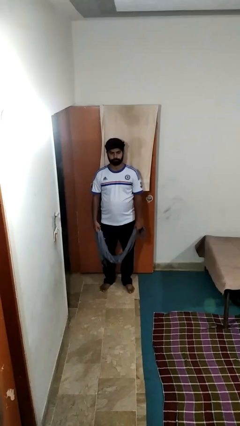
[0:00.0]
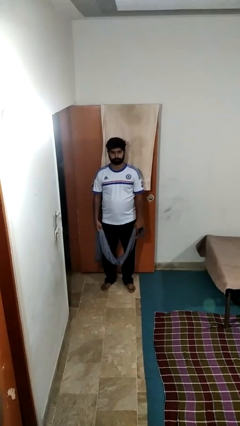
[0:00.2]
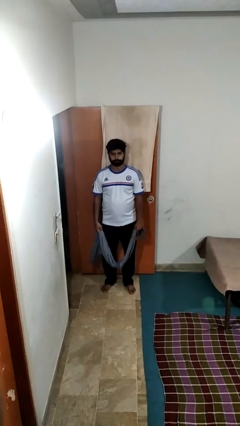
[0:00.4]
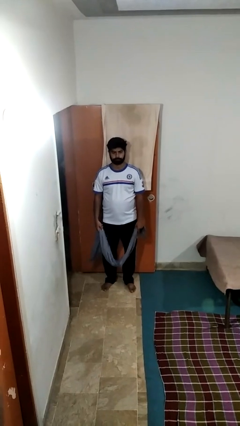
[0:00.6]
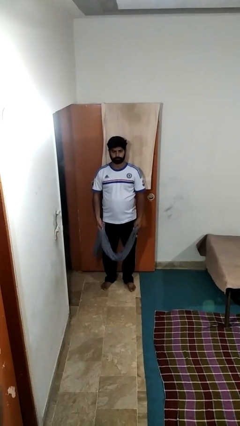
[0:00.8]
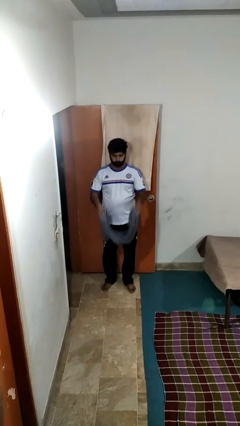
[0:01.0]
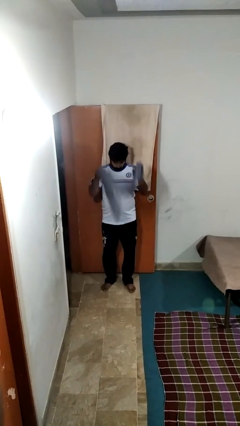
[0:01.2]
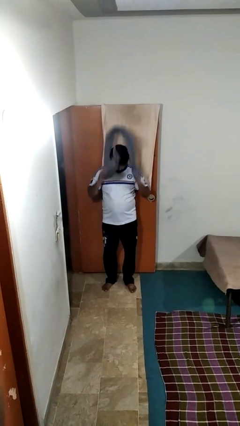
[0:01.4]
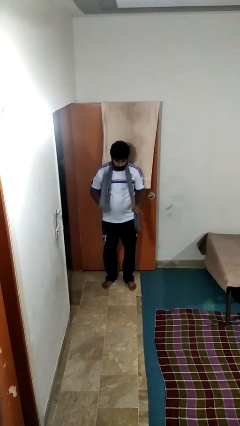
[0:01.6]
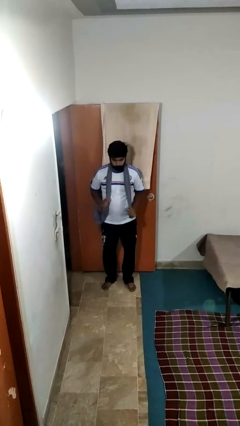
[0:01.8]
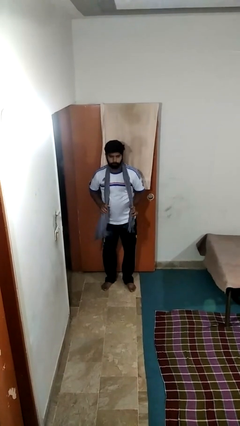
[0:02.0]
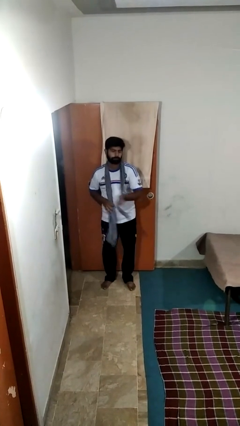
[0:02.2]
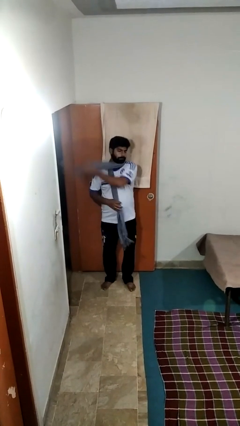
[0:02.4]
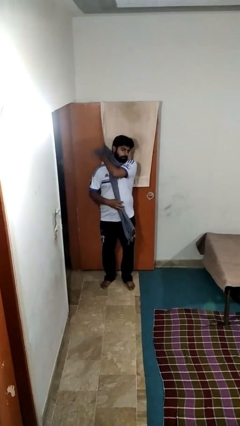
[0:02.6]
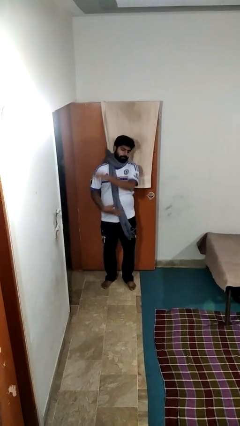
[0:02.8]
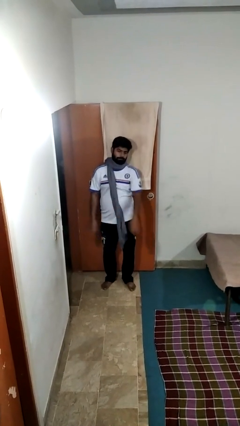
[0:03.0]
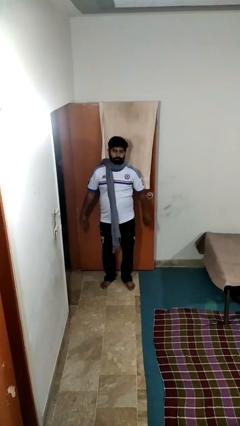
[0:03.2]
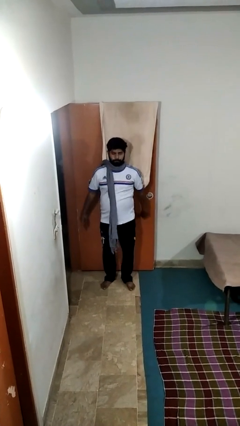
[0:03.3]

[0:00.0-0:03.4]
person puts on scarf

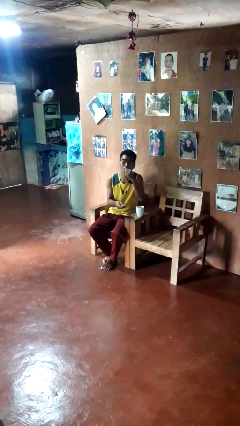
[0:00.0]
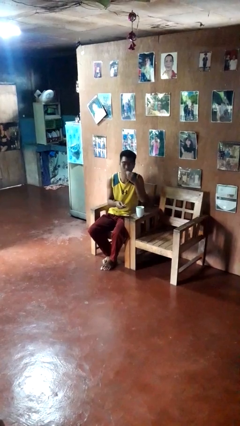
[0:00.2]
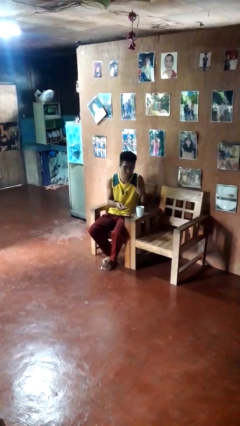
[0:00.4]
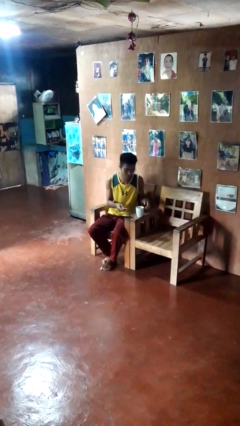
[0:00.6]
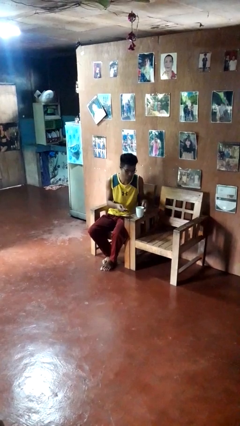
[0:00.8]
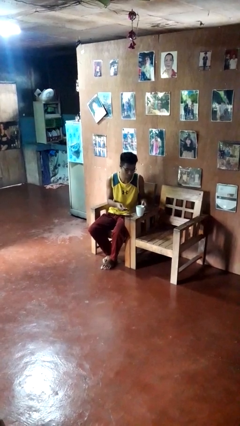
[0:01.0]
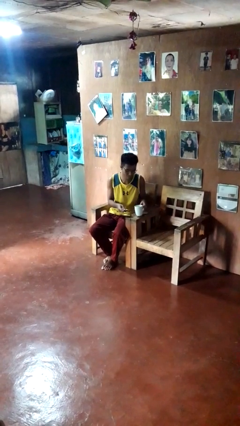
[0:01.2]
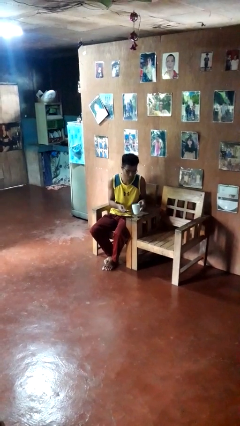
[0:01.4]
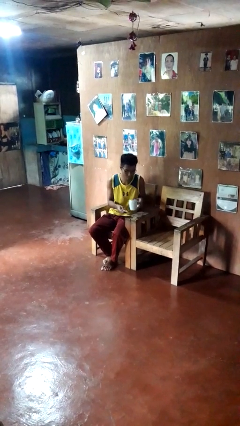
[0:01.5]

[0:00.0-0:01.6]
person takes medicine pills

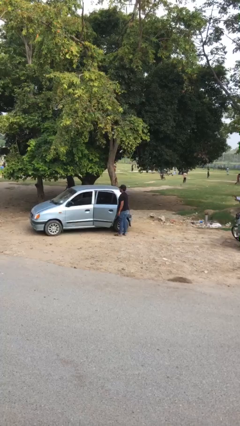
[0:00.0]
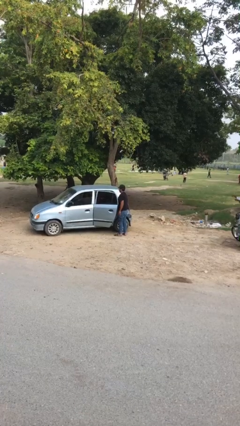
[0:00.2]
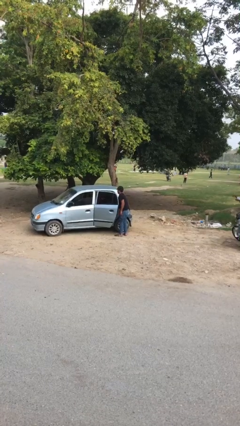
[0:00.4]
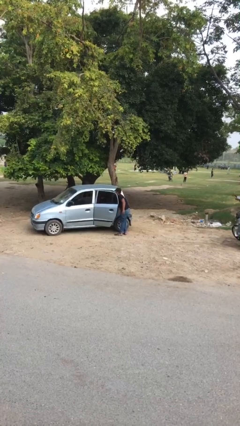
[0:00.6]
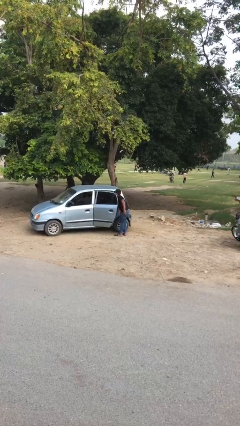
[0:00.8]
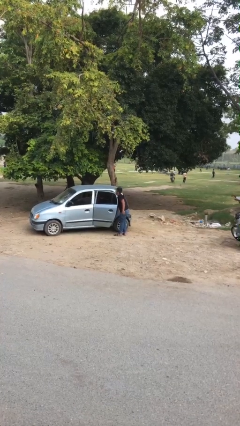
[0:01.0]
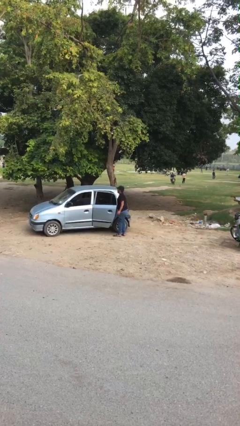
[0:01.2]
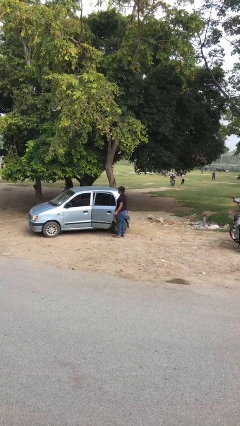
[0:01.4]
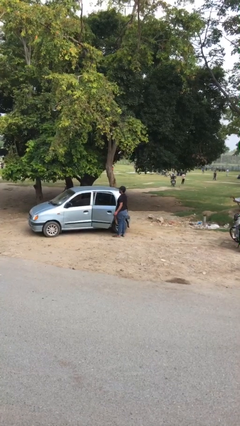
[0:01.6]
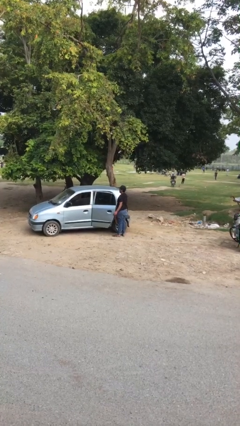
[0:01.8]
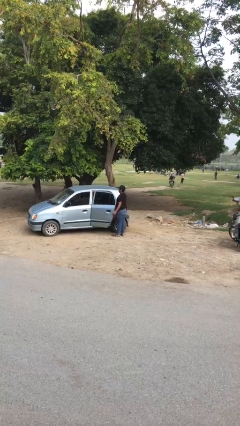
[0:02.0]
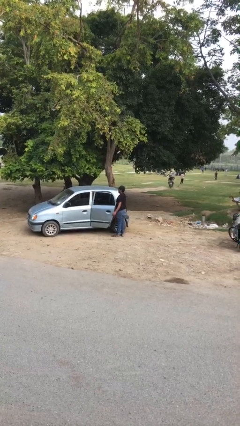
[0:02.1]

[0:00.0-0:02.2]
person unloads car

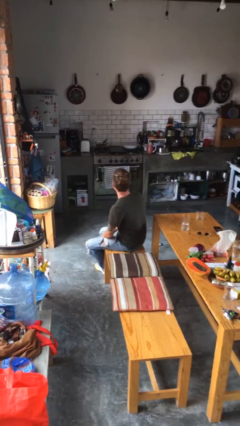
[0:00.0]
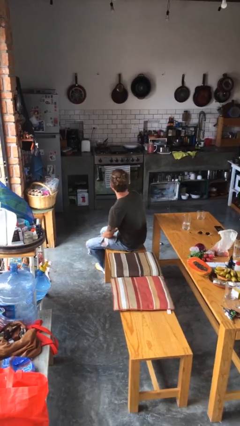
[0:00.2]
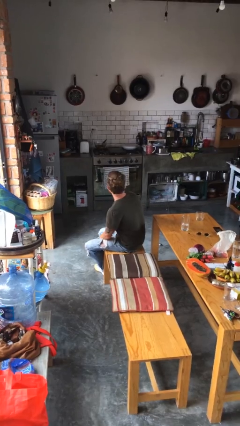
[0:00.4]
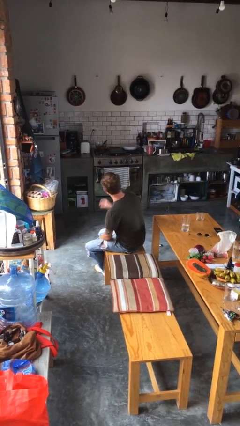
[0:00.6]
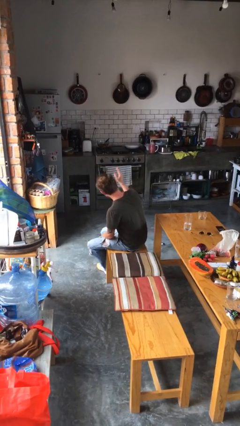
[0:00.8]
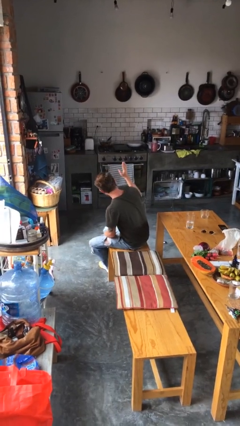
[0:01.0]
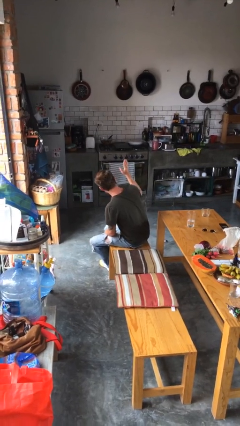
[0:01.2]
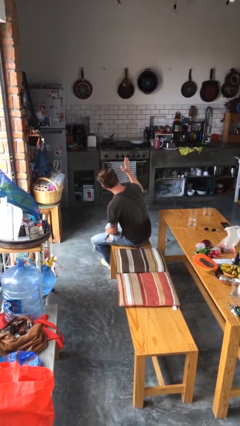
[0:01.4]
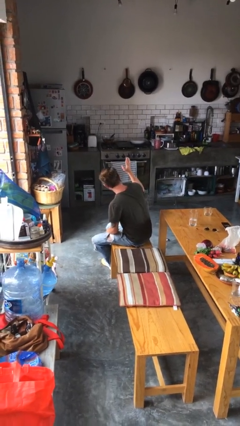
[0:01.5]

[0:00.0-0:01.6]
person gestures raise hand

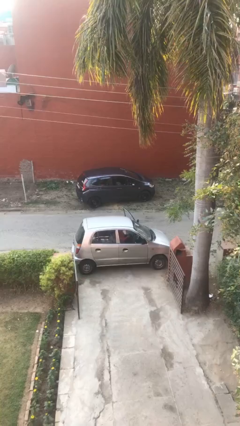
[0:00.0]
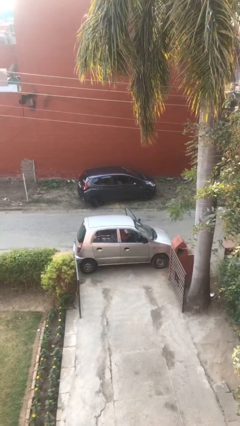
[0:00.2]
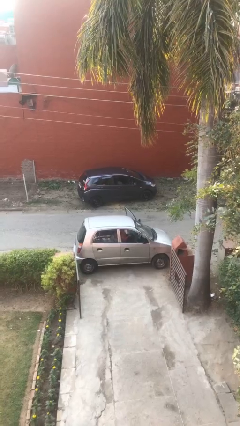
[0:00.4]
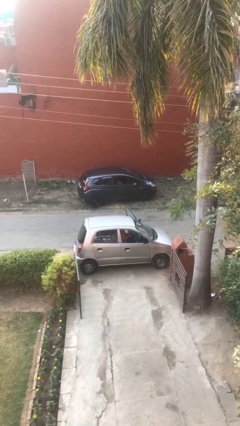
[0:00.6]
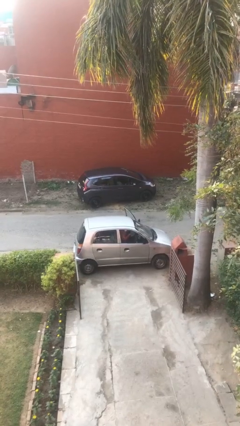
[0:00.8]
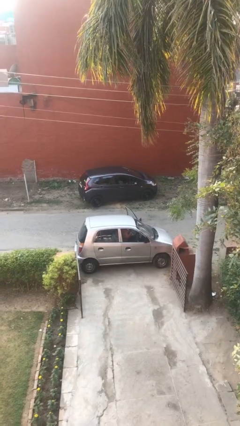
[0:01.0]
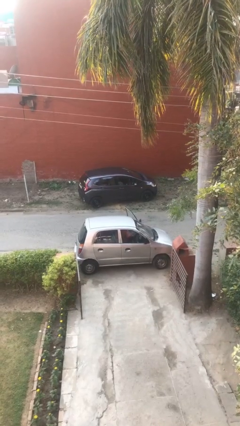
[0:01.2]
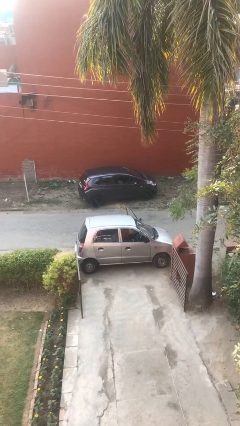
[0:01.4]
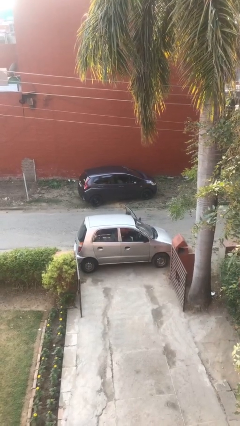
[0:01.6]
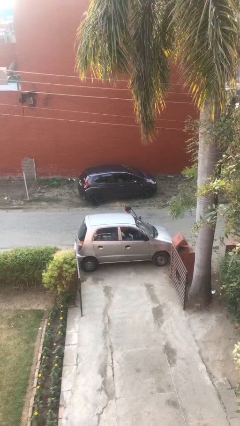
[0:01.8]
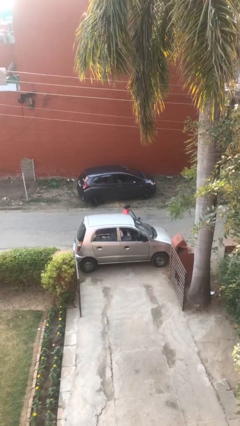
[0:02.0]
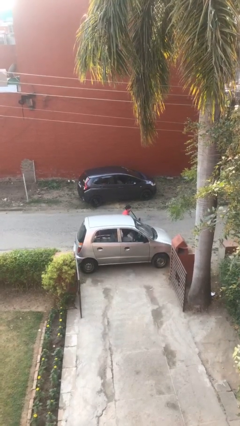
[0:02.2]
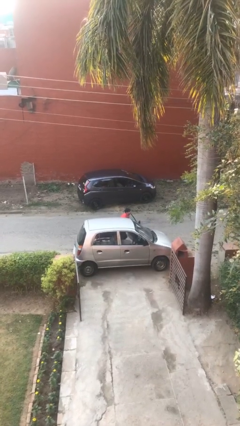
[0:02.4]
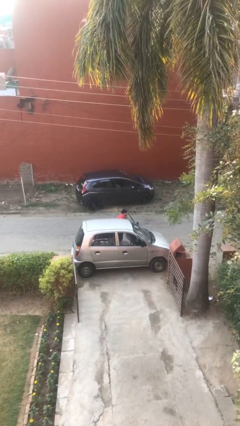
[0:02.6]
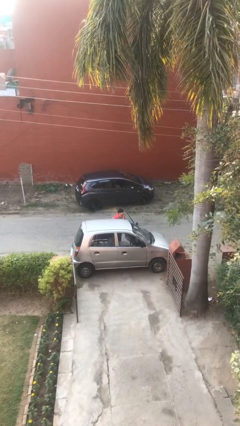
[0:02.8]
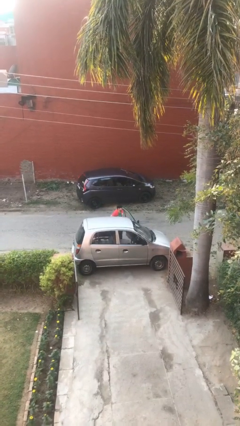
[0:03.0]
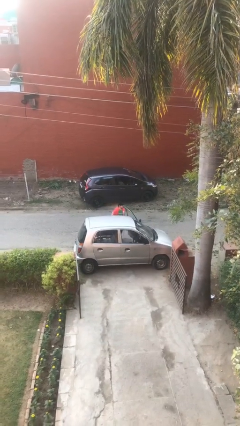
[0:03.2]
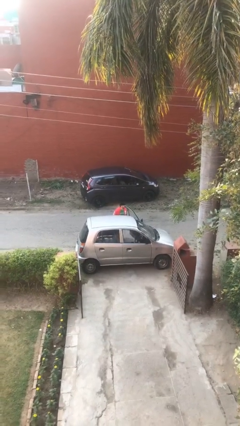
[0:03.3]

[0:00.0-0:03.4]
person exits car

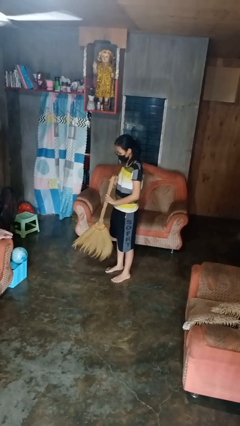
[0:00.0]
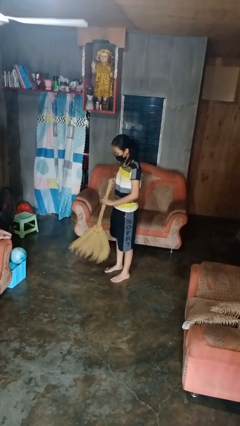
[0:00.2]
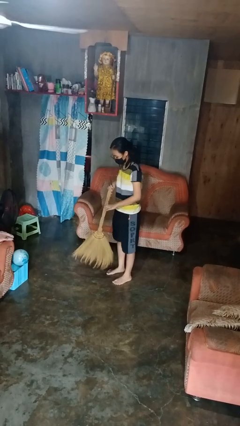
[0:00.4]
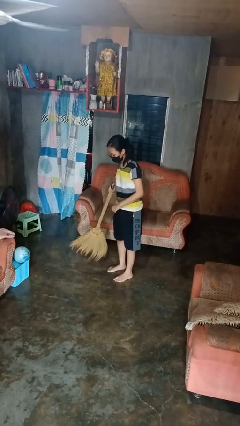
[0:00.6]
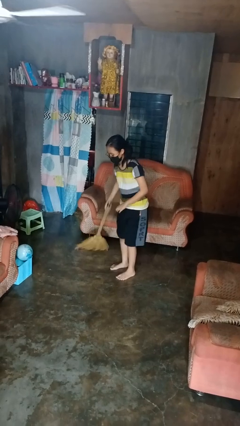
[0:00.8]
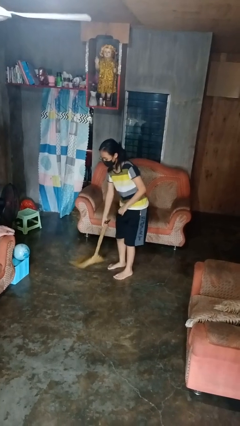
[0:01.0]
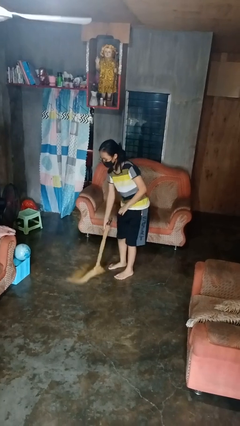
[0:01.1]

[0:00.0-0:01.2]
person sweeps floor

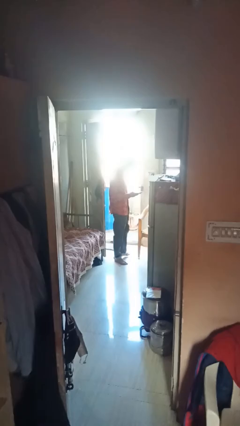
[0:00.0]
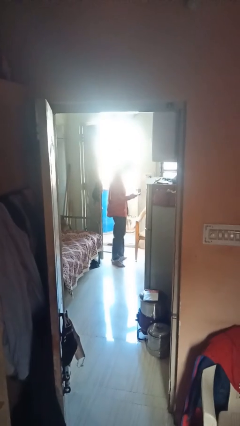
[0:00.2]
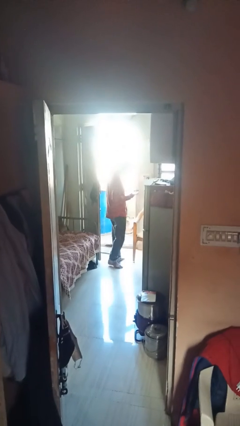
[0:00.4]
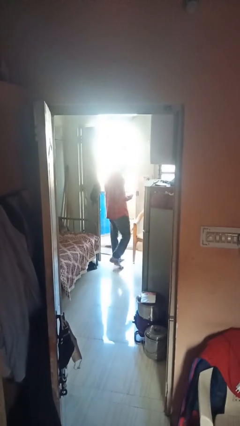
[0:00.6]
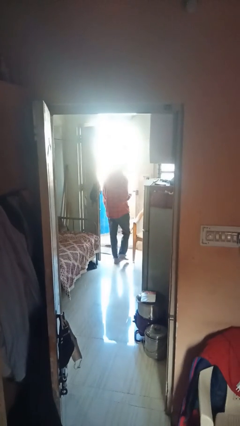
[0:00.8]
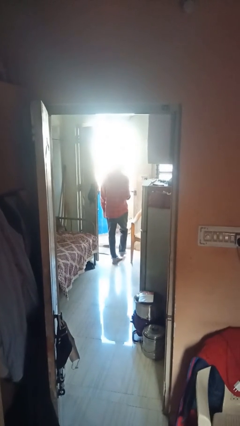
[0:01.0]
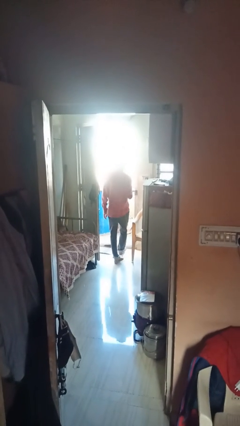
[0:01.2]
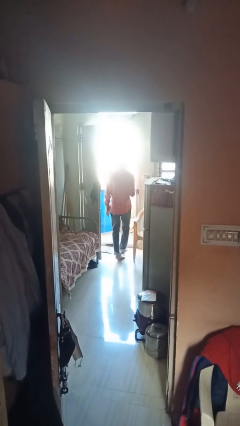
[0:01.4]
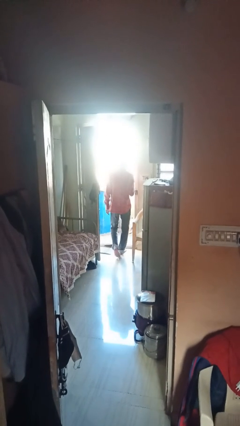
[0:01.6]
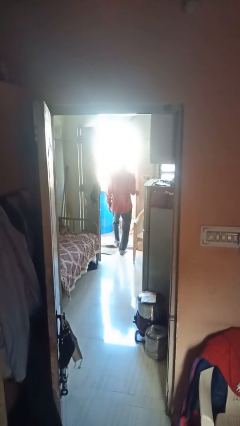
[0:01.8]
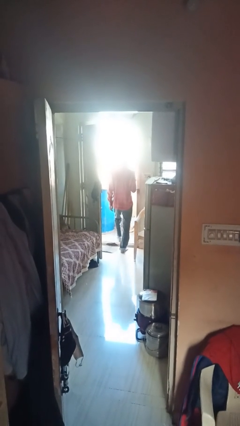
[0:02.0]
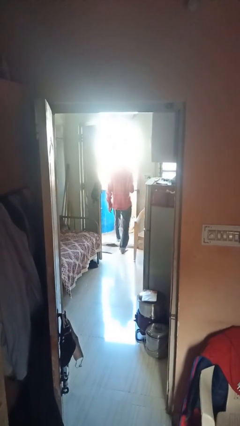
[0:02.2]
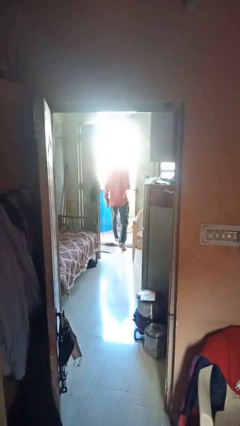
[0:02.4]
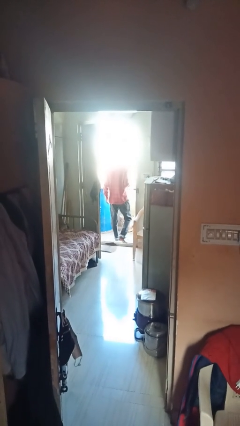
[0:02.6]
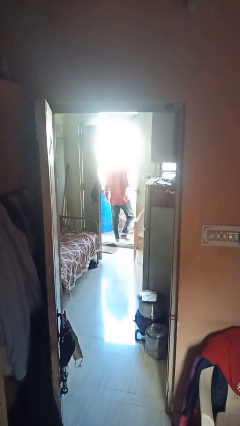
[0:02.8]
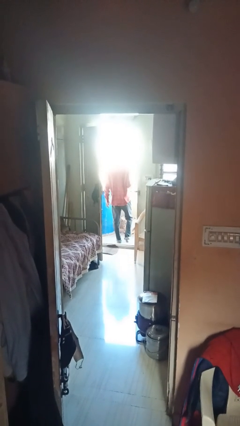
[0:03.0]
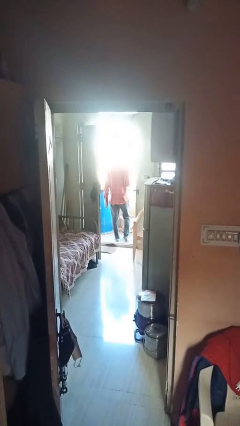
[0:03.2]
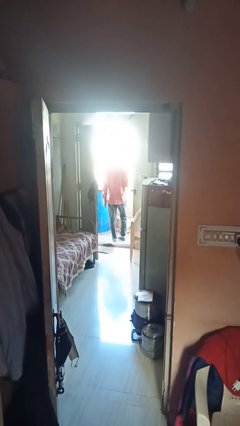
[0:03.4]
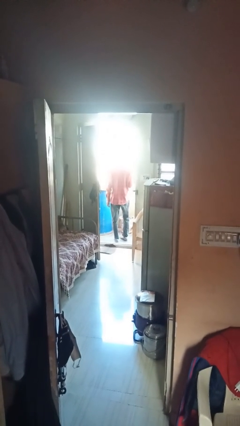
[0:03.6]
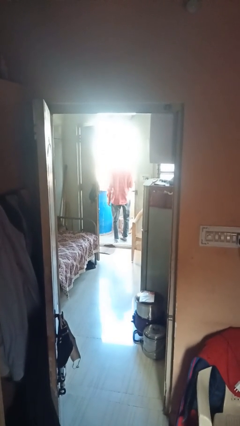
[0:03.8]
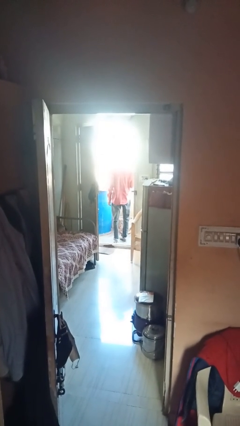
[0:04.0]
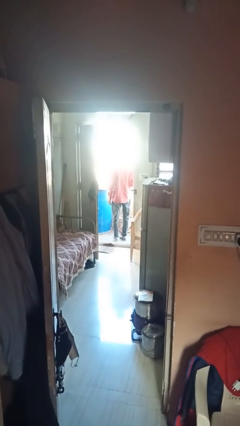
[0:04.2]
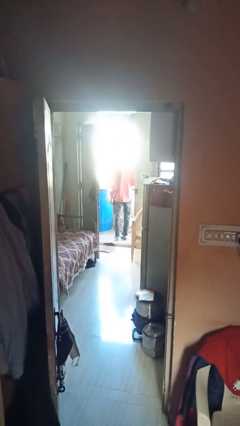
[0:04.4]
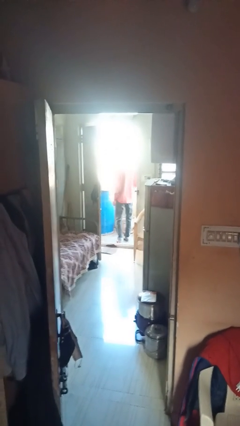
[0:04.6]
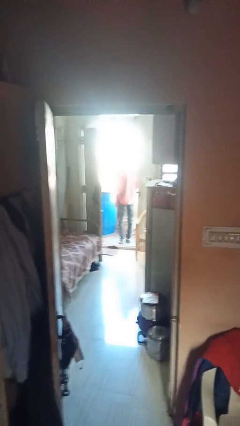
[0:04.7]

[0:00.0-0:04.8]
person exits scene through structure
